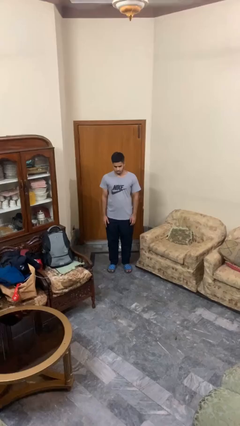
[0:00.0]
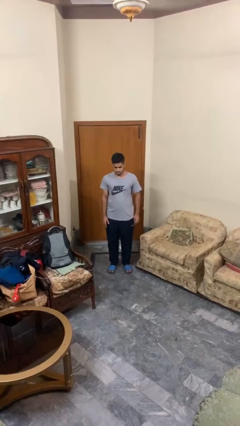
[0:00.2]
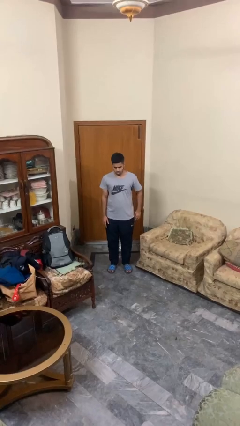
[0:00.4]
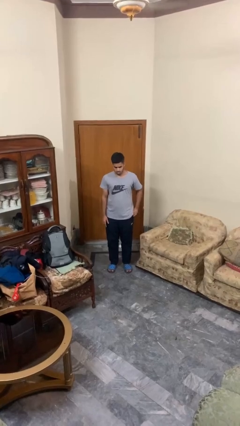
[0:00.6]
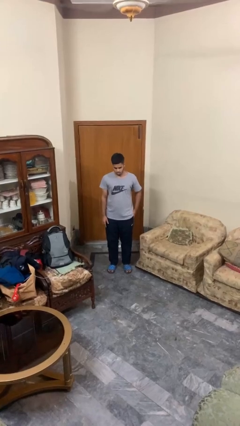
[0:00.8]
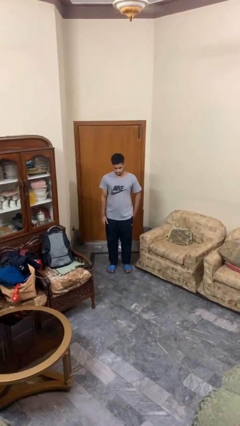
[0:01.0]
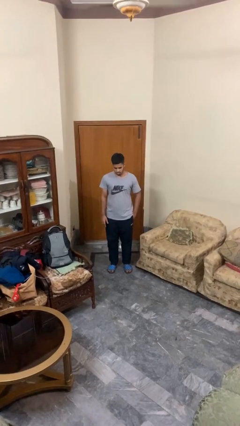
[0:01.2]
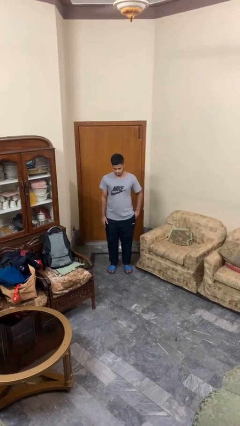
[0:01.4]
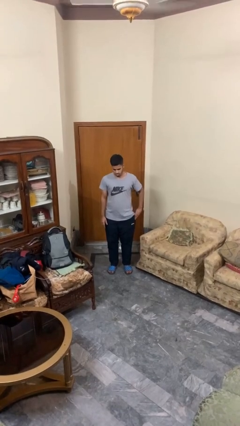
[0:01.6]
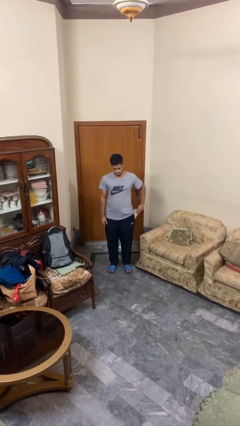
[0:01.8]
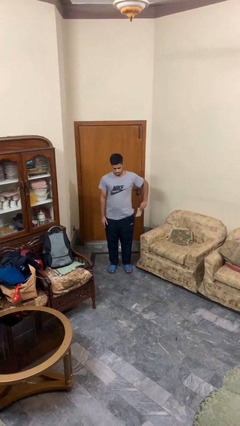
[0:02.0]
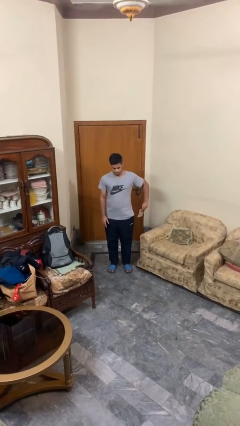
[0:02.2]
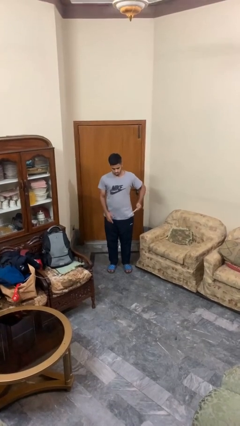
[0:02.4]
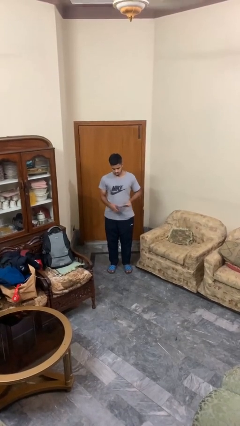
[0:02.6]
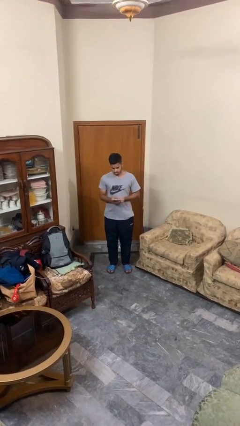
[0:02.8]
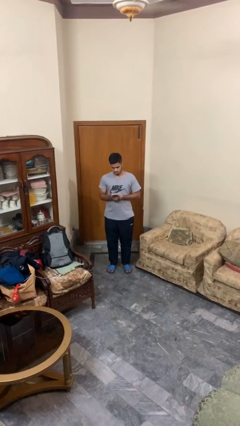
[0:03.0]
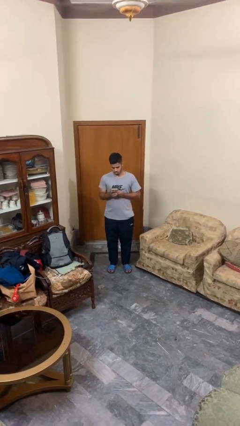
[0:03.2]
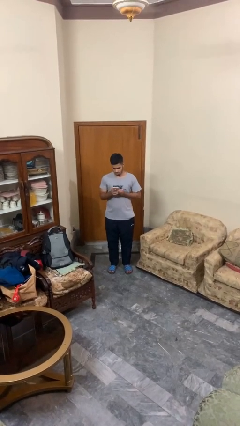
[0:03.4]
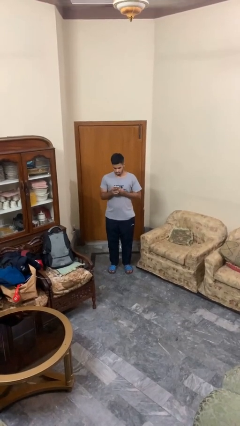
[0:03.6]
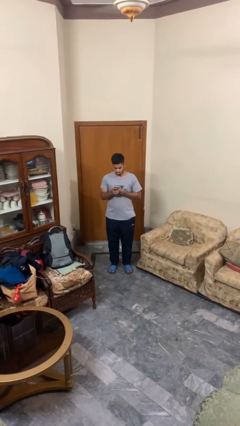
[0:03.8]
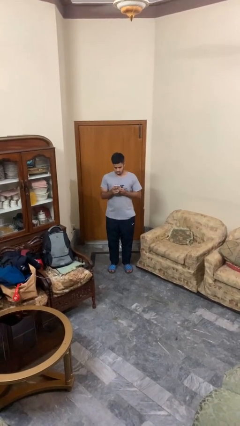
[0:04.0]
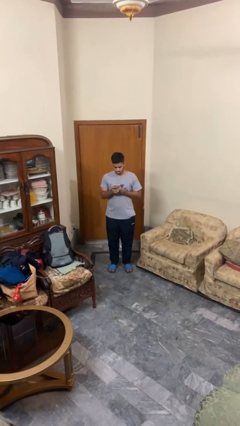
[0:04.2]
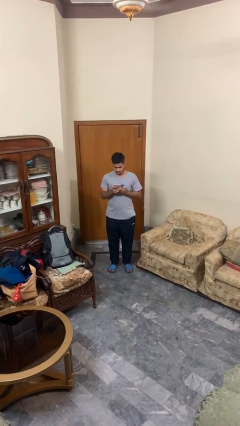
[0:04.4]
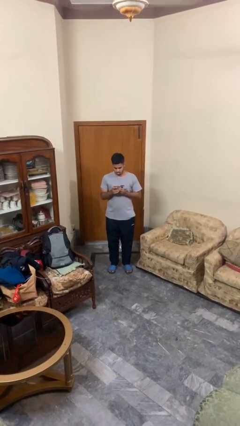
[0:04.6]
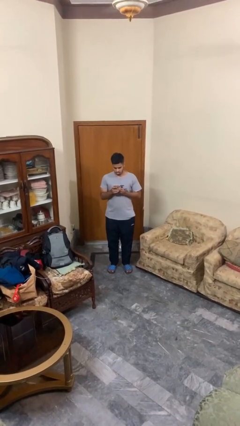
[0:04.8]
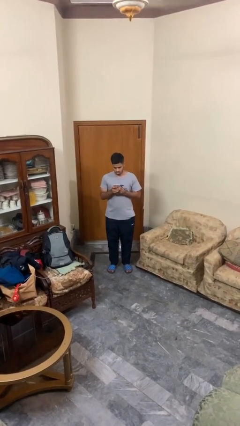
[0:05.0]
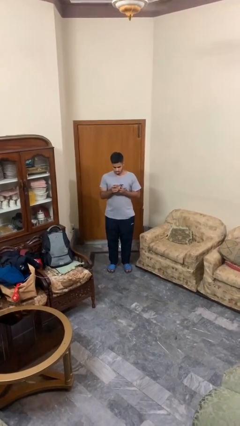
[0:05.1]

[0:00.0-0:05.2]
person takes phone from pocket

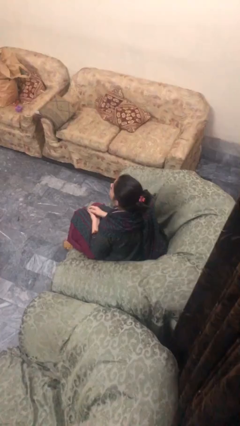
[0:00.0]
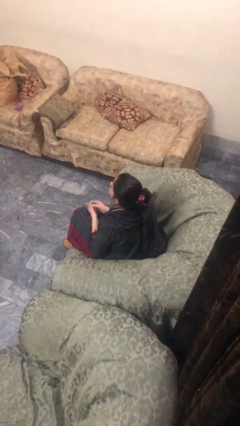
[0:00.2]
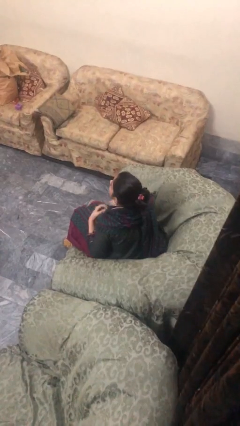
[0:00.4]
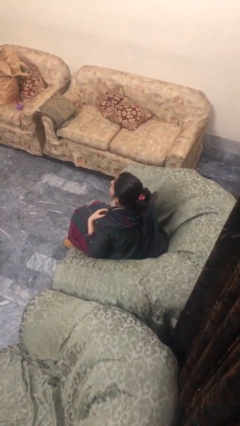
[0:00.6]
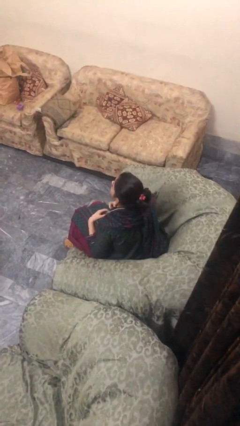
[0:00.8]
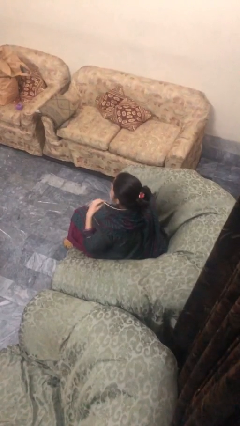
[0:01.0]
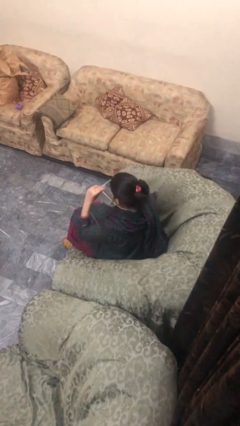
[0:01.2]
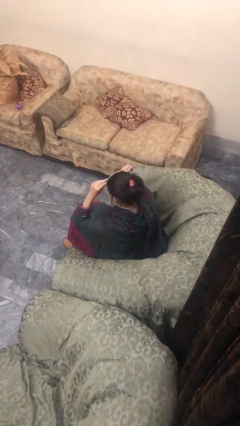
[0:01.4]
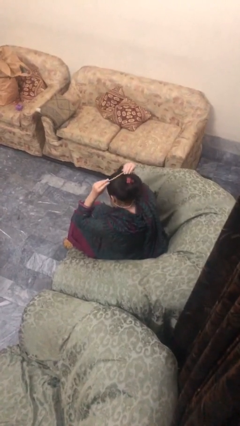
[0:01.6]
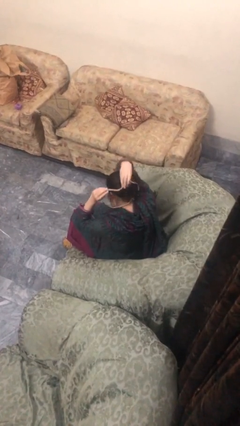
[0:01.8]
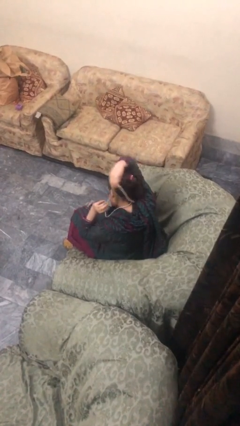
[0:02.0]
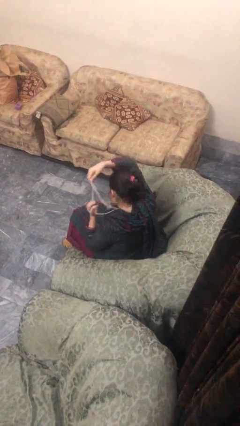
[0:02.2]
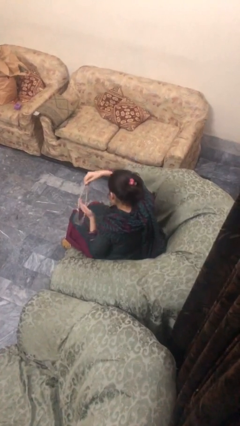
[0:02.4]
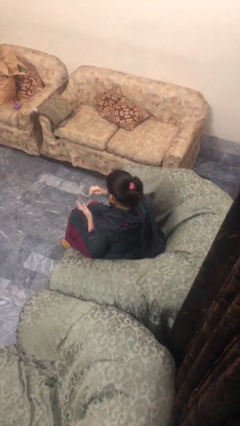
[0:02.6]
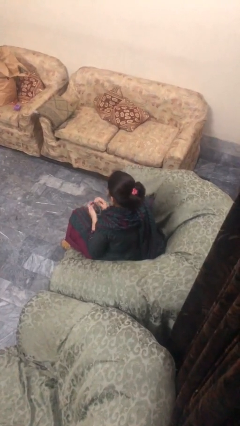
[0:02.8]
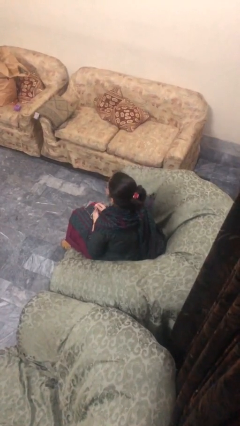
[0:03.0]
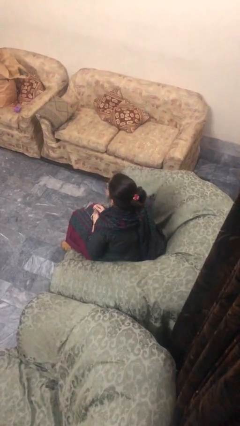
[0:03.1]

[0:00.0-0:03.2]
person takes off necklace

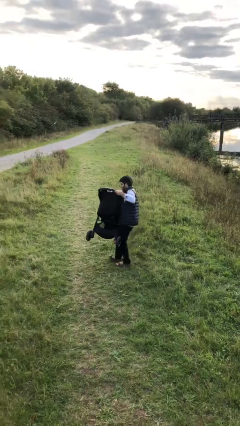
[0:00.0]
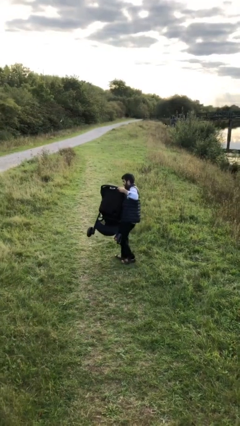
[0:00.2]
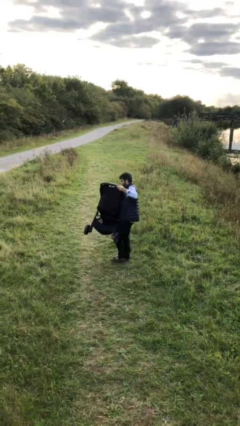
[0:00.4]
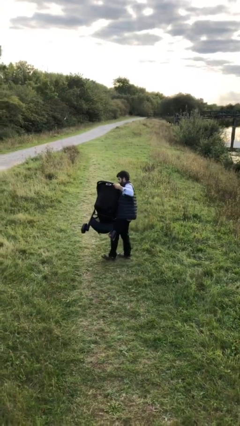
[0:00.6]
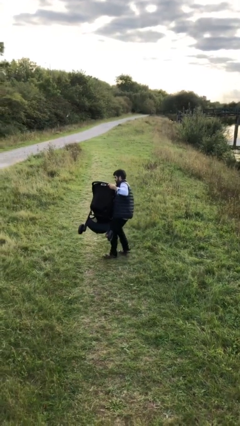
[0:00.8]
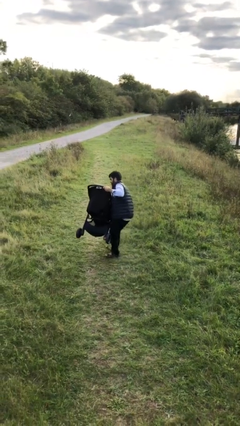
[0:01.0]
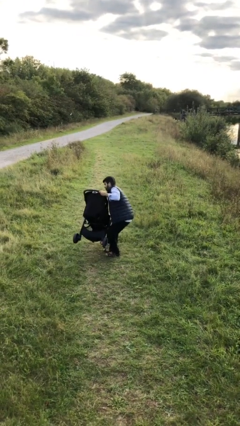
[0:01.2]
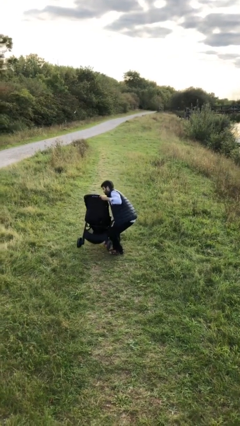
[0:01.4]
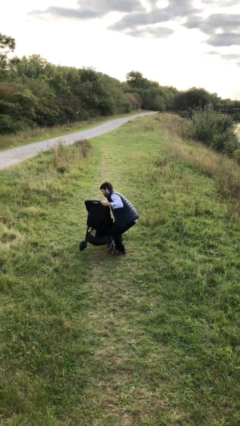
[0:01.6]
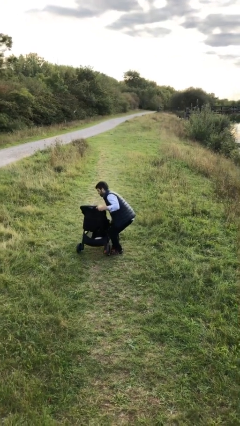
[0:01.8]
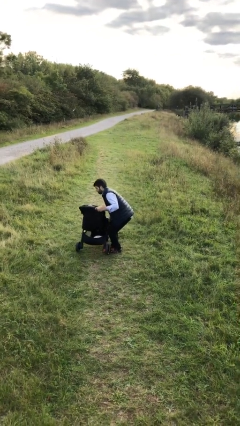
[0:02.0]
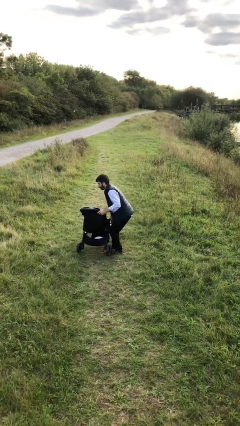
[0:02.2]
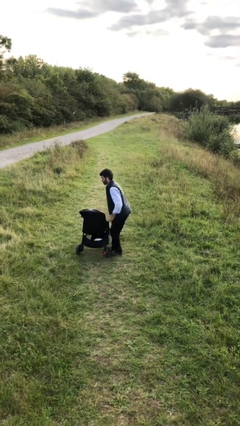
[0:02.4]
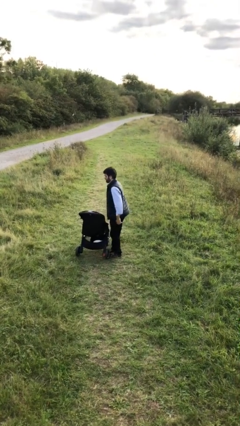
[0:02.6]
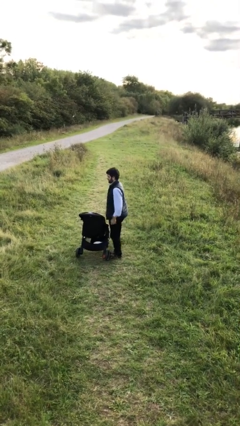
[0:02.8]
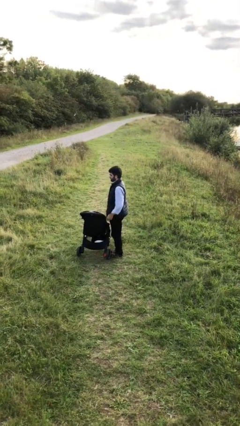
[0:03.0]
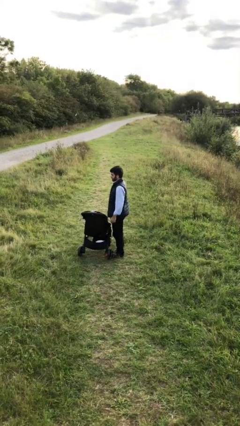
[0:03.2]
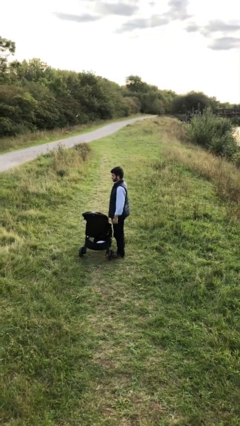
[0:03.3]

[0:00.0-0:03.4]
person puts down object on floor

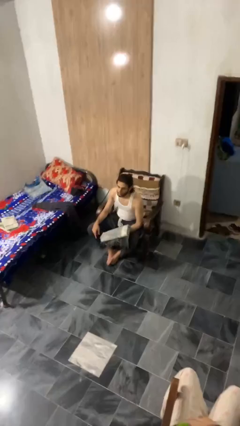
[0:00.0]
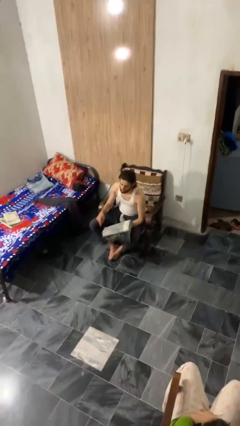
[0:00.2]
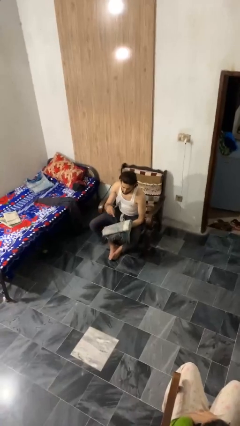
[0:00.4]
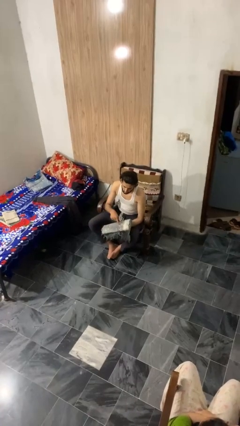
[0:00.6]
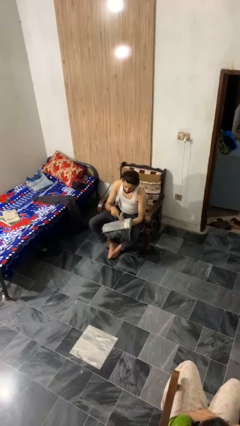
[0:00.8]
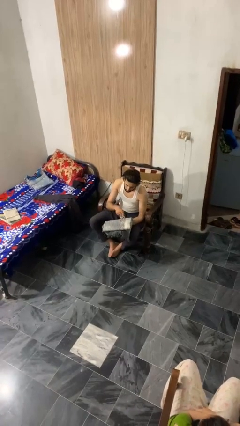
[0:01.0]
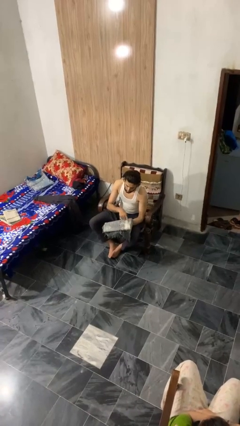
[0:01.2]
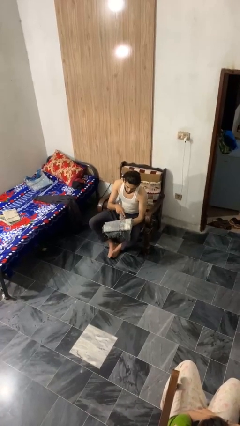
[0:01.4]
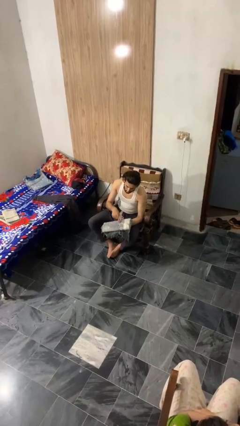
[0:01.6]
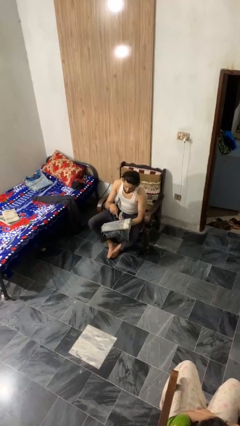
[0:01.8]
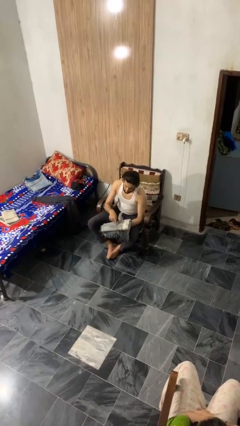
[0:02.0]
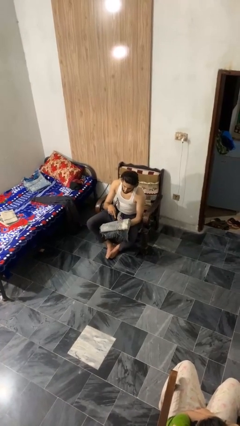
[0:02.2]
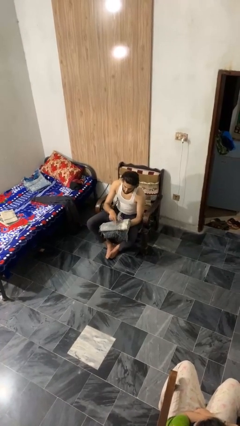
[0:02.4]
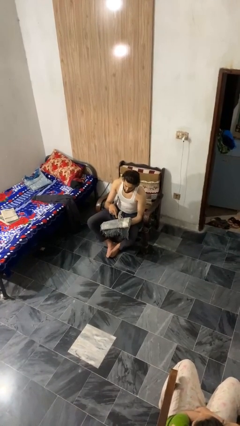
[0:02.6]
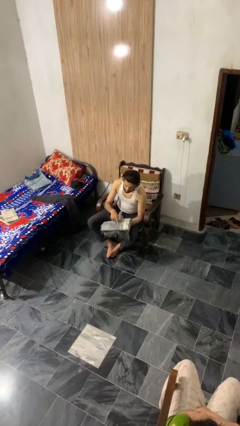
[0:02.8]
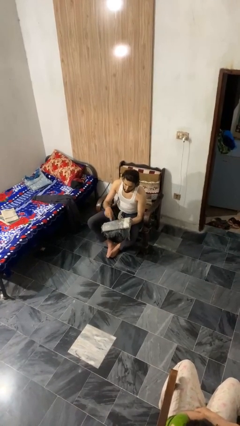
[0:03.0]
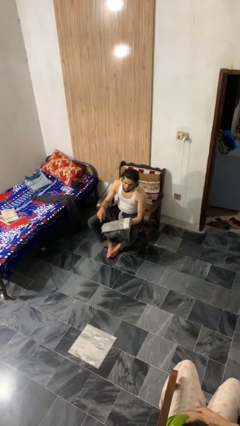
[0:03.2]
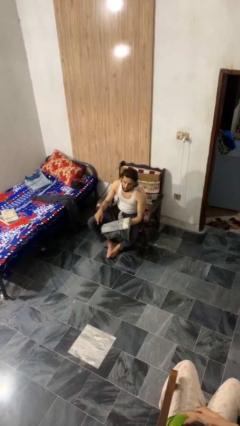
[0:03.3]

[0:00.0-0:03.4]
person taps object with finger

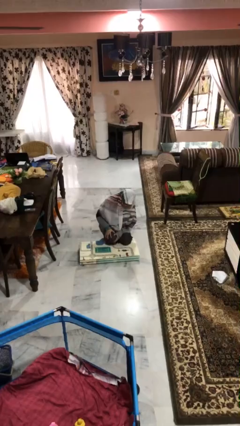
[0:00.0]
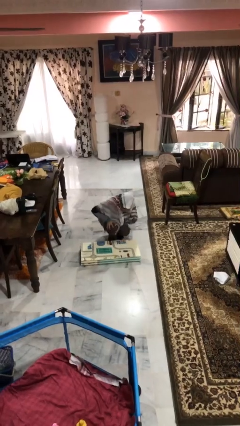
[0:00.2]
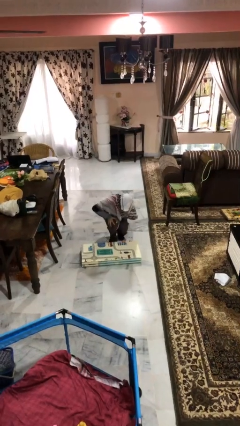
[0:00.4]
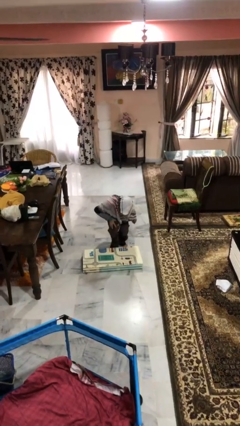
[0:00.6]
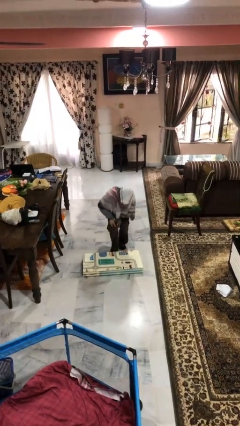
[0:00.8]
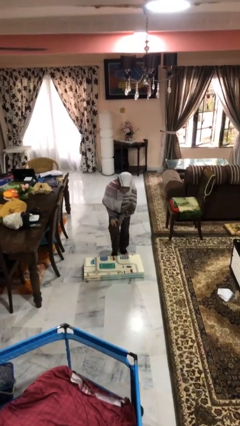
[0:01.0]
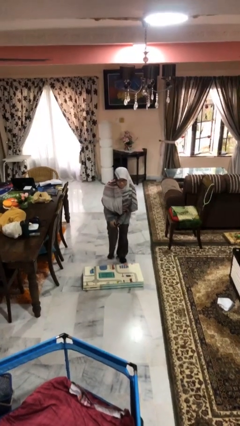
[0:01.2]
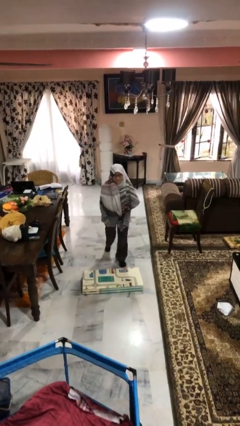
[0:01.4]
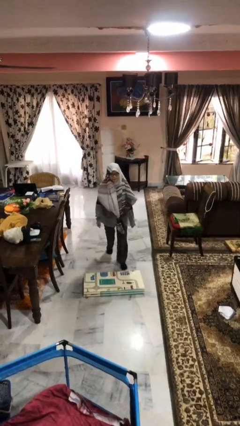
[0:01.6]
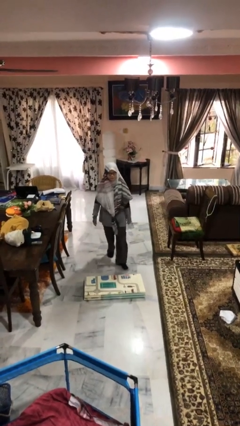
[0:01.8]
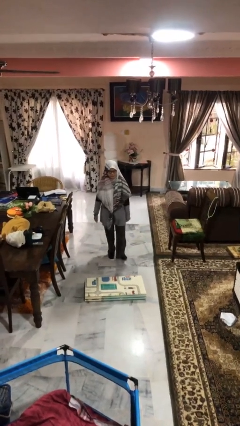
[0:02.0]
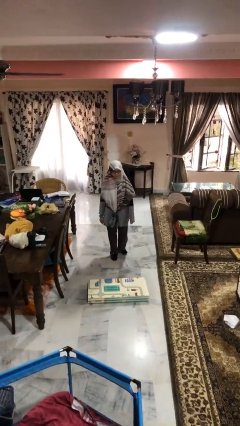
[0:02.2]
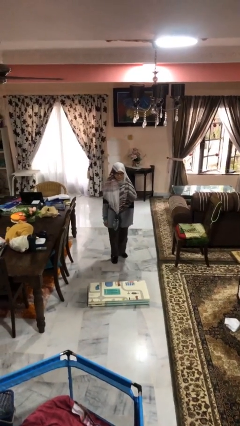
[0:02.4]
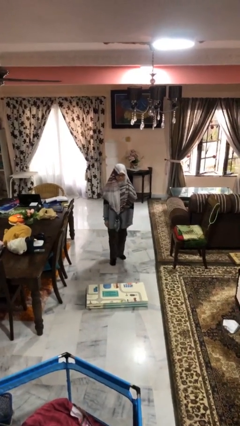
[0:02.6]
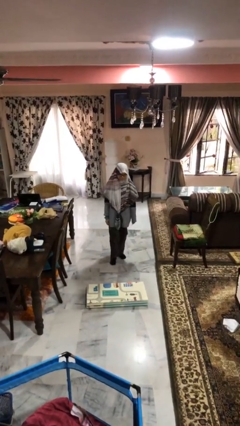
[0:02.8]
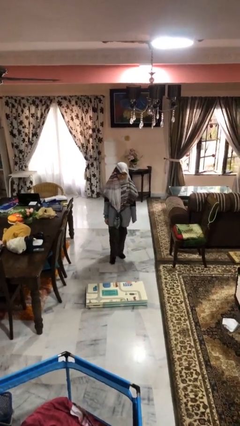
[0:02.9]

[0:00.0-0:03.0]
person stands up from floor
